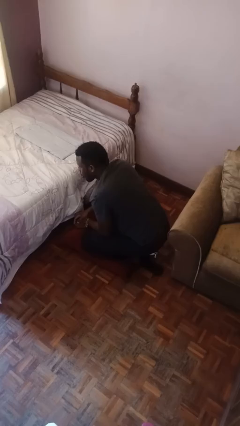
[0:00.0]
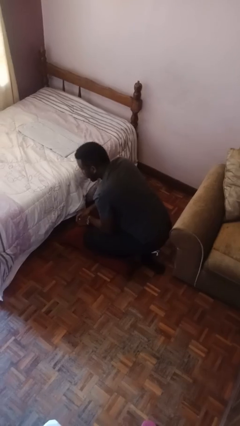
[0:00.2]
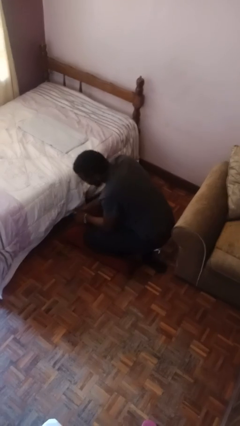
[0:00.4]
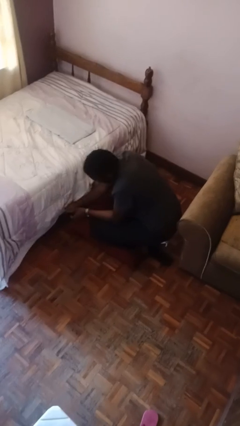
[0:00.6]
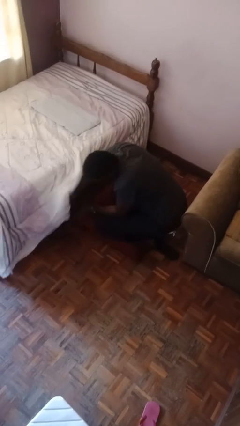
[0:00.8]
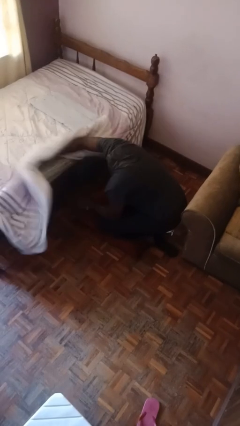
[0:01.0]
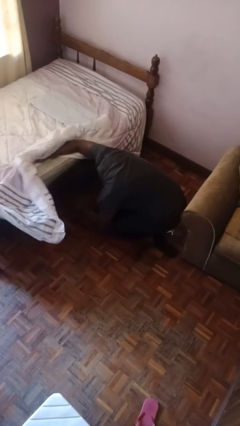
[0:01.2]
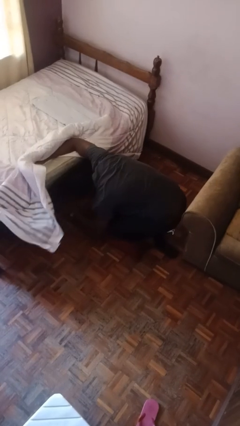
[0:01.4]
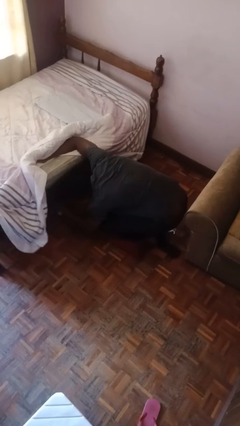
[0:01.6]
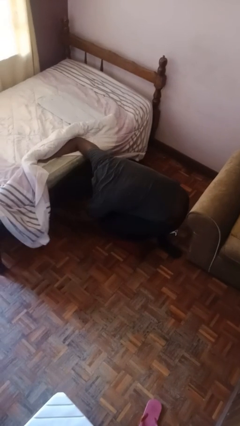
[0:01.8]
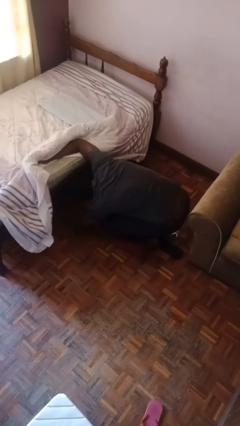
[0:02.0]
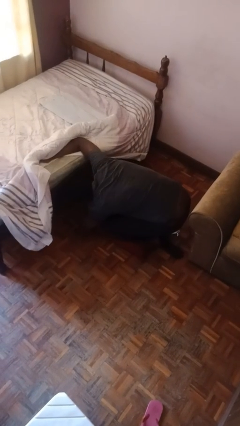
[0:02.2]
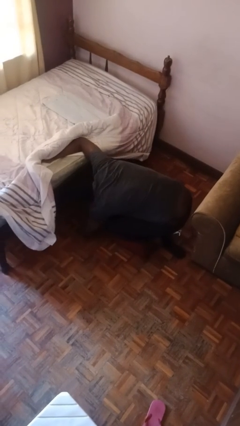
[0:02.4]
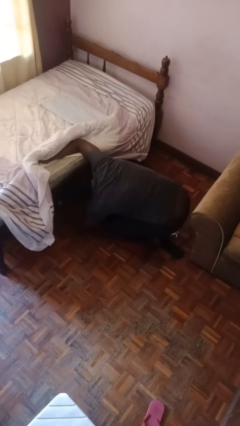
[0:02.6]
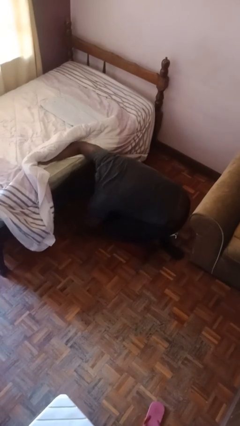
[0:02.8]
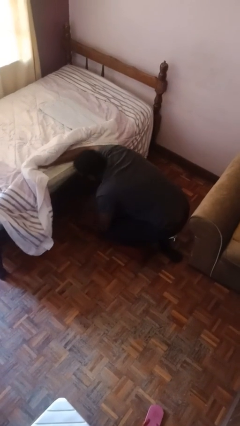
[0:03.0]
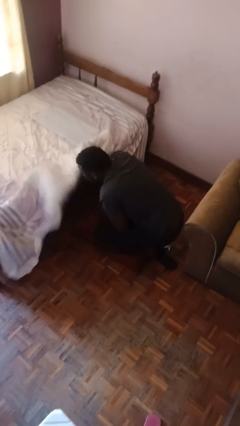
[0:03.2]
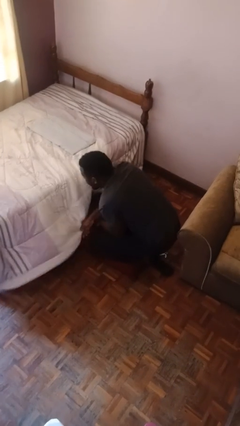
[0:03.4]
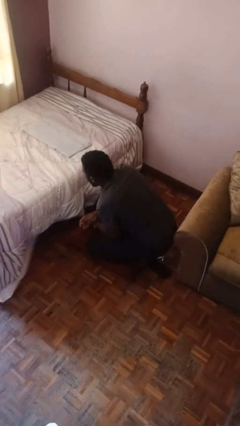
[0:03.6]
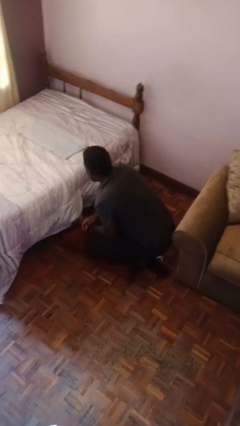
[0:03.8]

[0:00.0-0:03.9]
person searches under bed

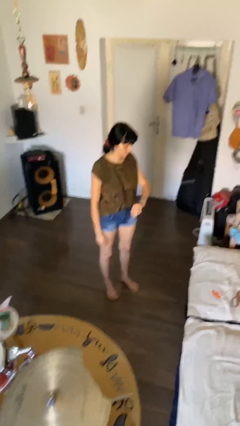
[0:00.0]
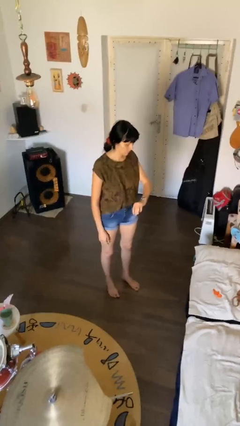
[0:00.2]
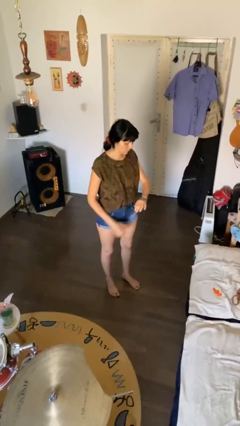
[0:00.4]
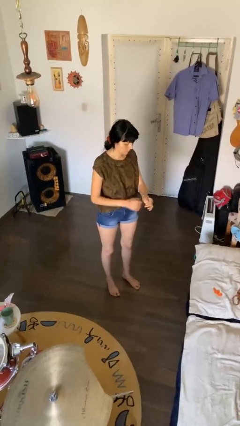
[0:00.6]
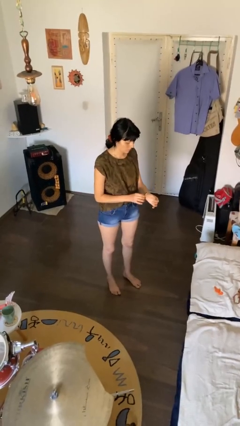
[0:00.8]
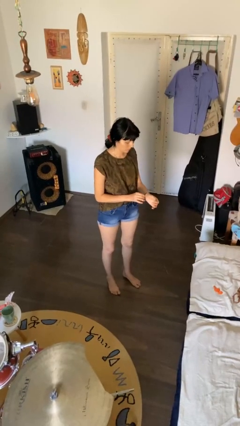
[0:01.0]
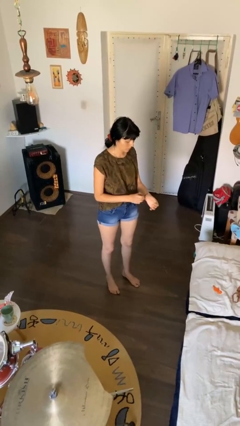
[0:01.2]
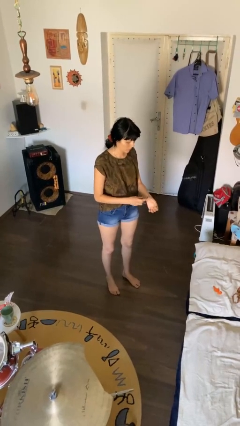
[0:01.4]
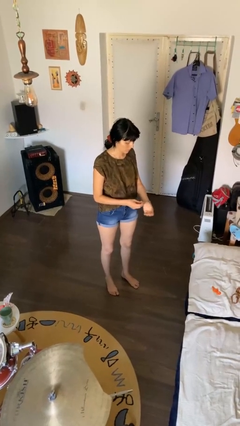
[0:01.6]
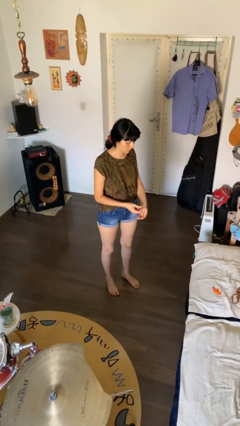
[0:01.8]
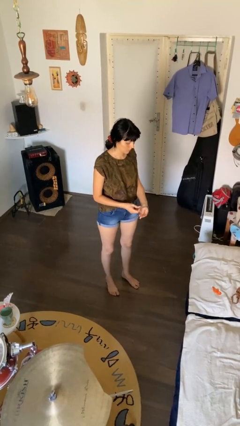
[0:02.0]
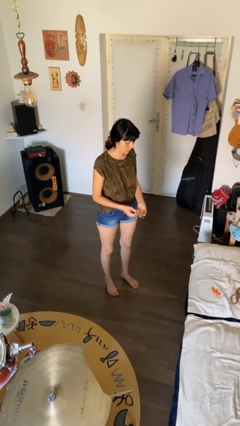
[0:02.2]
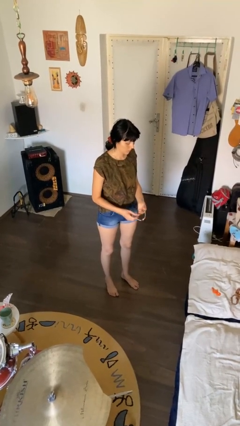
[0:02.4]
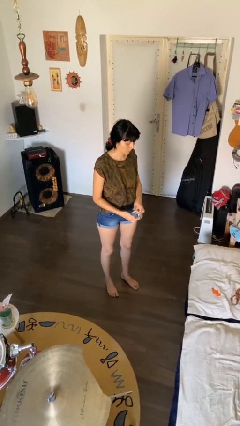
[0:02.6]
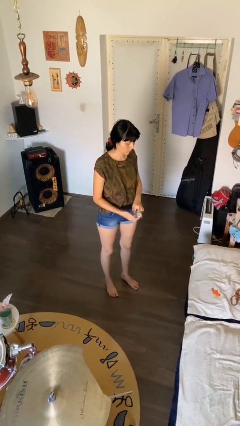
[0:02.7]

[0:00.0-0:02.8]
person takes off wristwatch

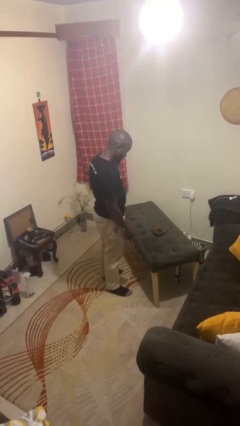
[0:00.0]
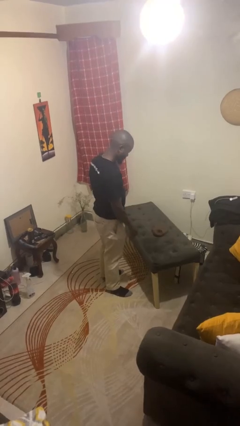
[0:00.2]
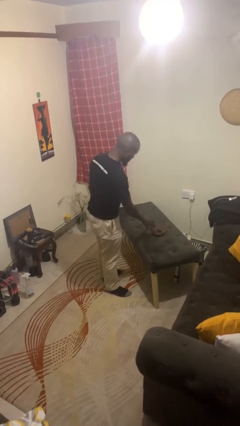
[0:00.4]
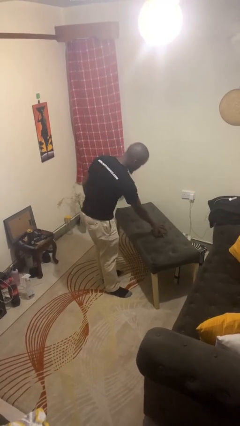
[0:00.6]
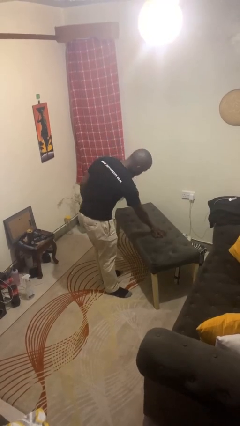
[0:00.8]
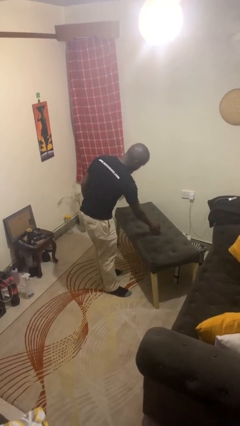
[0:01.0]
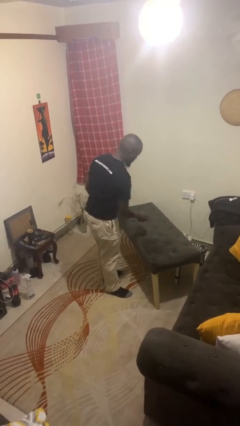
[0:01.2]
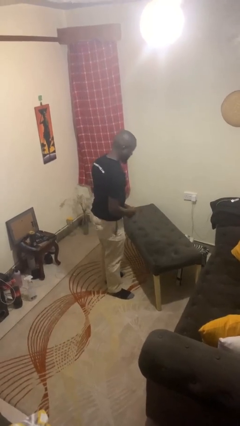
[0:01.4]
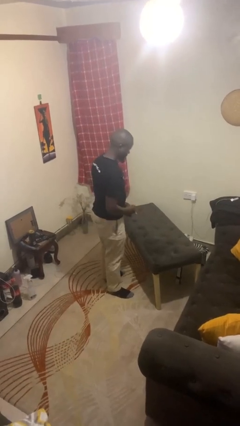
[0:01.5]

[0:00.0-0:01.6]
person picks up object from table

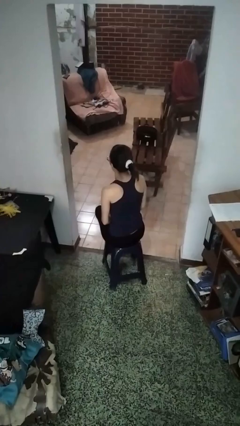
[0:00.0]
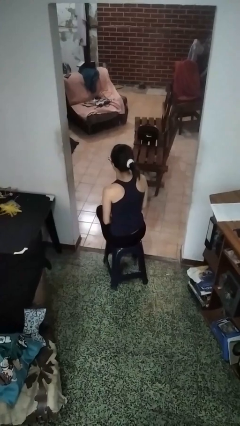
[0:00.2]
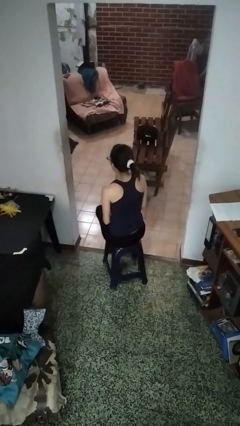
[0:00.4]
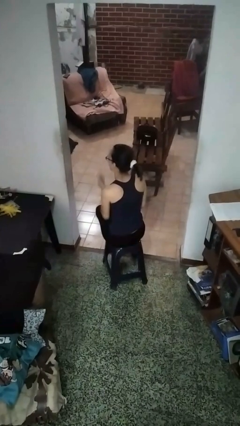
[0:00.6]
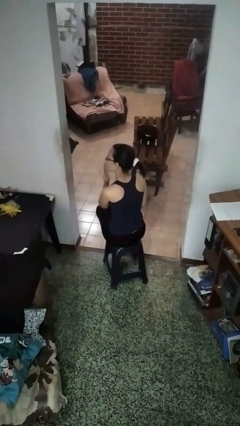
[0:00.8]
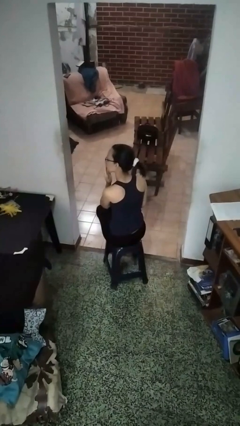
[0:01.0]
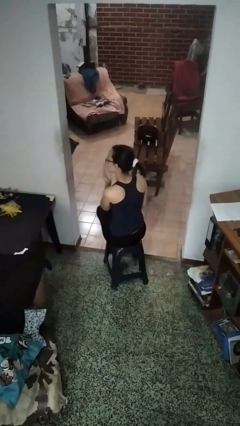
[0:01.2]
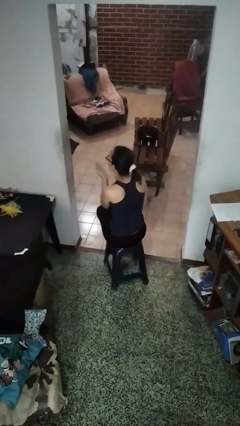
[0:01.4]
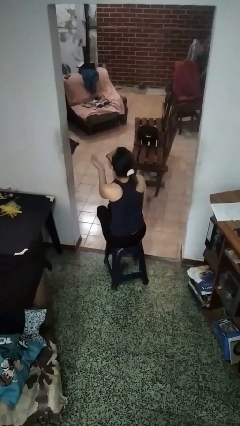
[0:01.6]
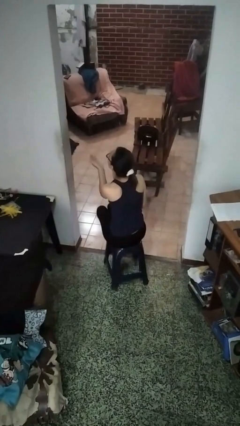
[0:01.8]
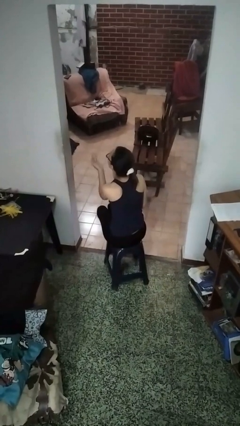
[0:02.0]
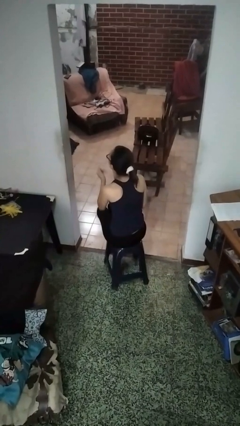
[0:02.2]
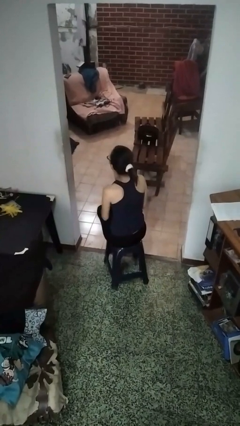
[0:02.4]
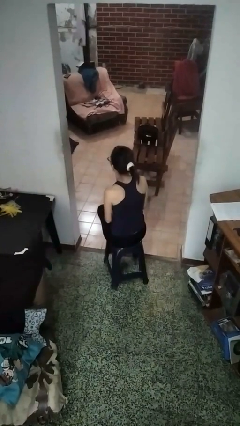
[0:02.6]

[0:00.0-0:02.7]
person gestures blow kiss

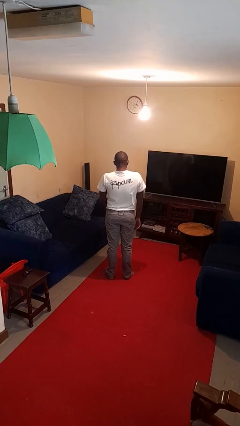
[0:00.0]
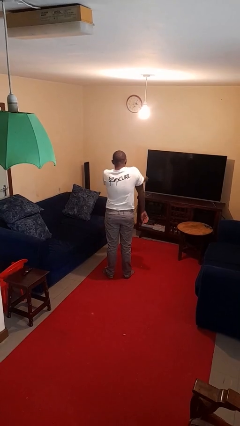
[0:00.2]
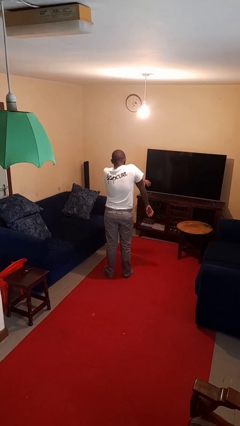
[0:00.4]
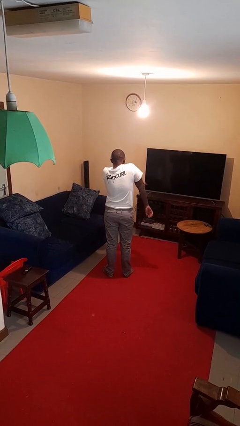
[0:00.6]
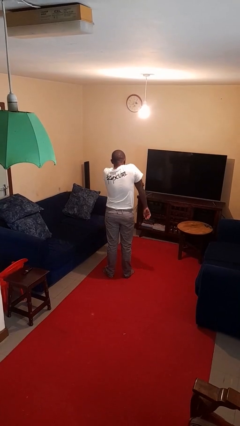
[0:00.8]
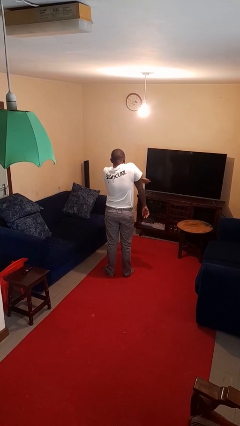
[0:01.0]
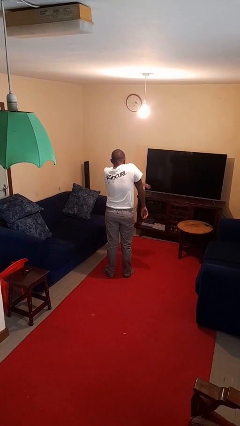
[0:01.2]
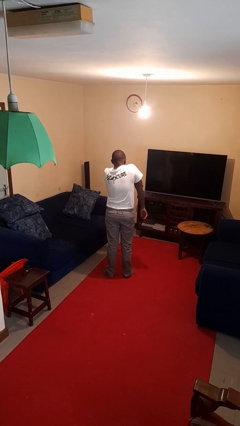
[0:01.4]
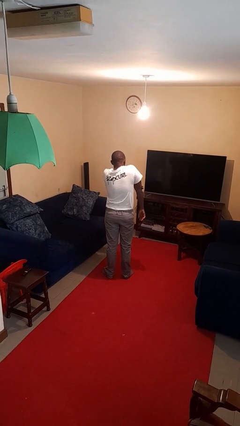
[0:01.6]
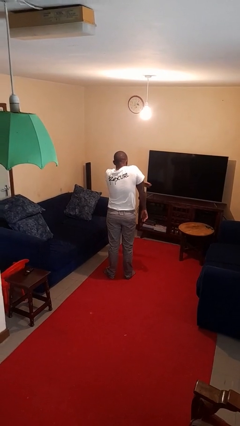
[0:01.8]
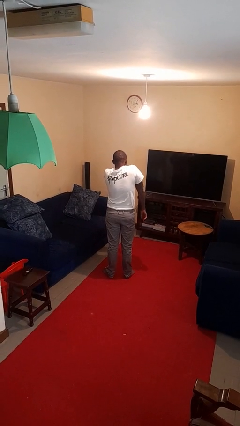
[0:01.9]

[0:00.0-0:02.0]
person swats bug

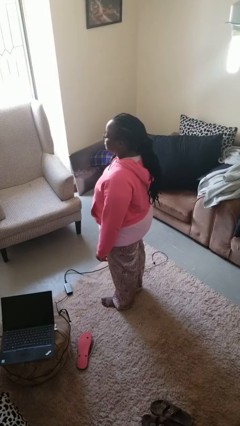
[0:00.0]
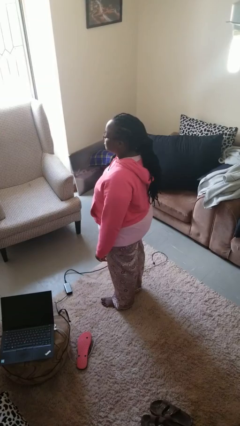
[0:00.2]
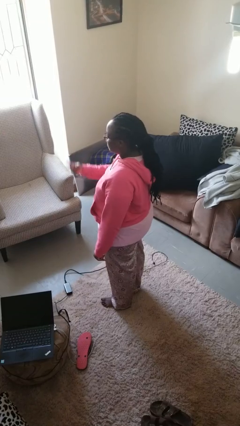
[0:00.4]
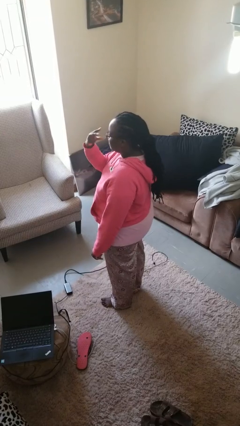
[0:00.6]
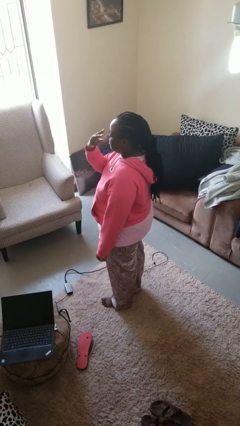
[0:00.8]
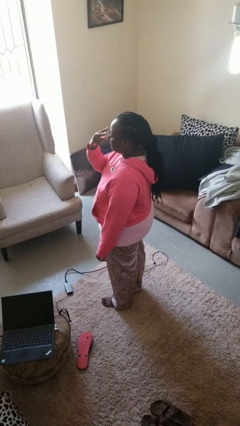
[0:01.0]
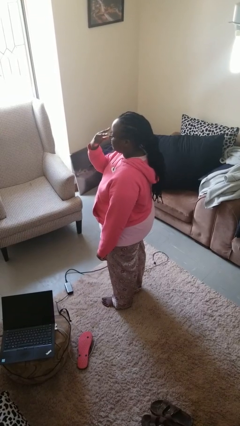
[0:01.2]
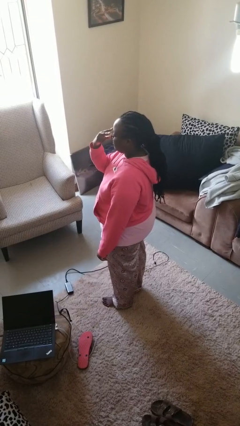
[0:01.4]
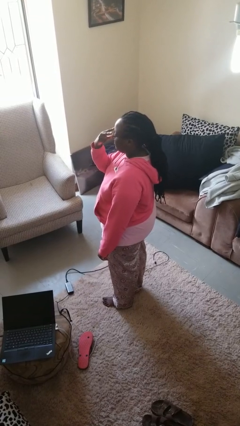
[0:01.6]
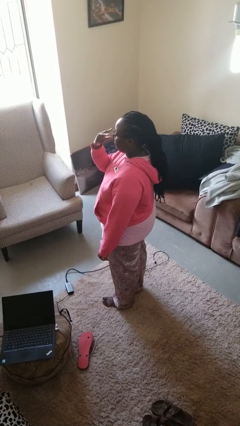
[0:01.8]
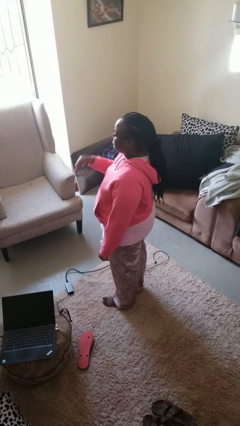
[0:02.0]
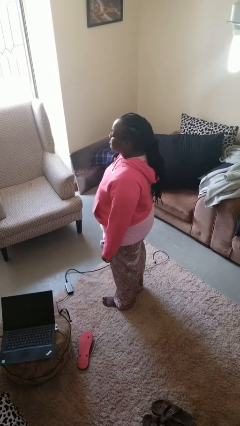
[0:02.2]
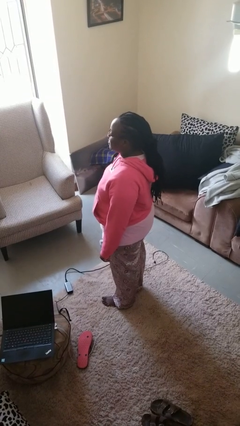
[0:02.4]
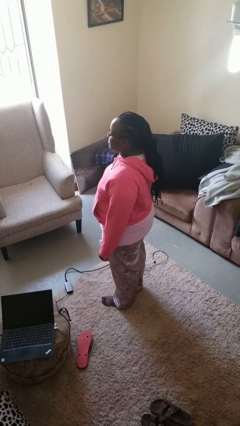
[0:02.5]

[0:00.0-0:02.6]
person gestures watch closely

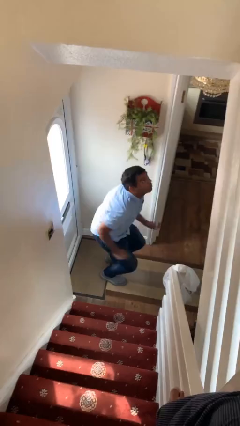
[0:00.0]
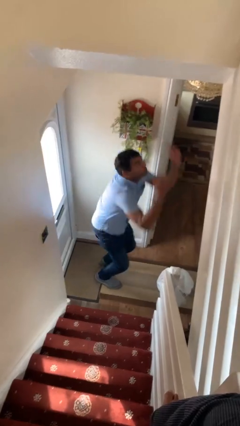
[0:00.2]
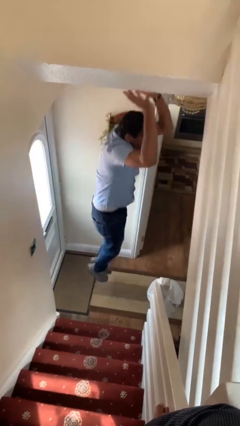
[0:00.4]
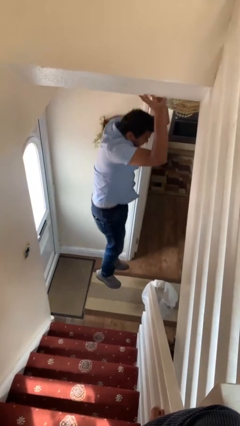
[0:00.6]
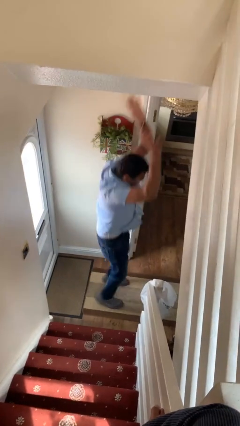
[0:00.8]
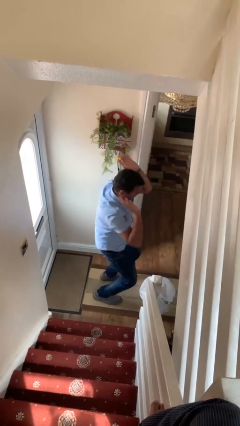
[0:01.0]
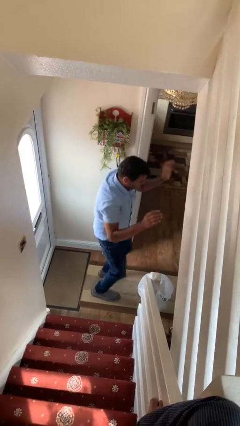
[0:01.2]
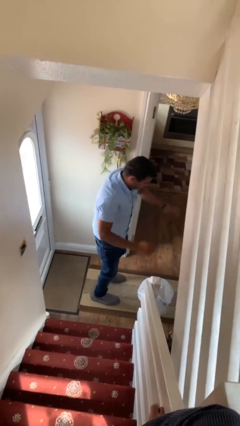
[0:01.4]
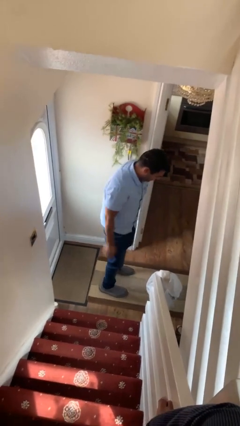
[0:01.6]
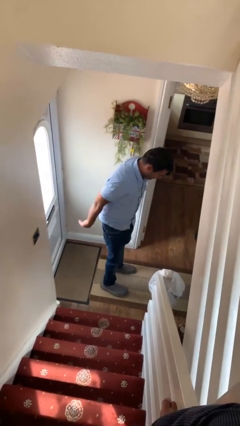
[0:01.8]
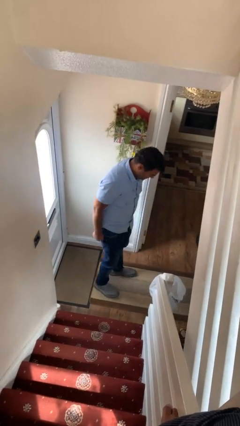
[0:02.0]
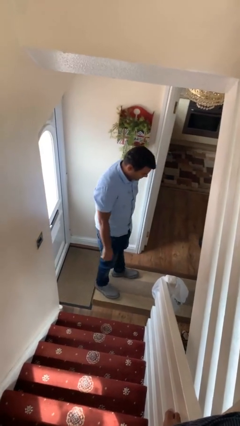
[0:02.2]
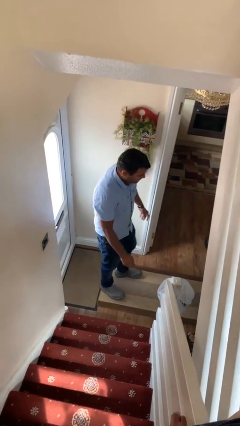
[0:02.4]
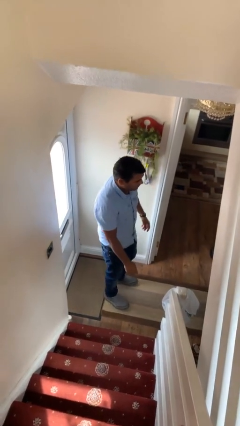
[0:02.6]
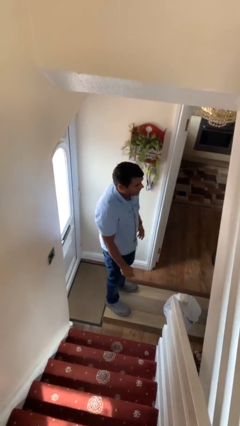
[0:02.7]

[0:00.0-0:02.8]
person jumps
